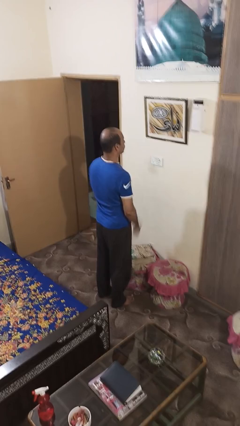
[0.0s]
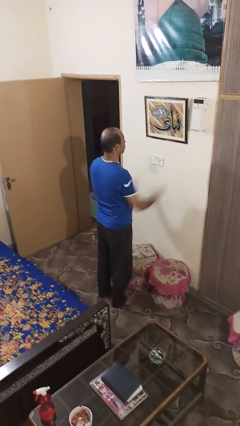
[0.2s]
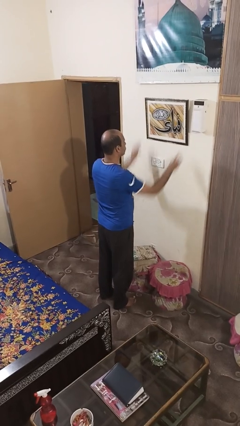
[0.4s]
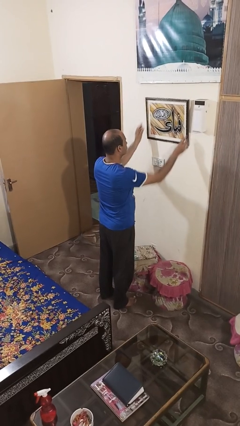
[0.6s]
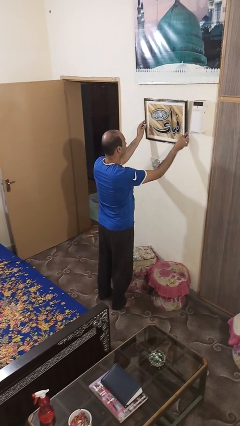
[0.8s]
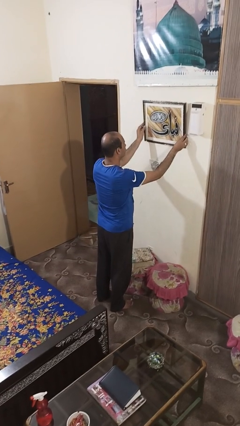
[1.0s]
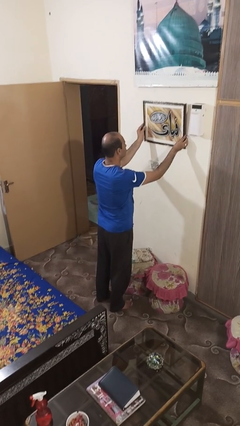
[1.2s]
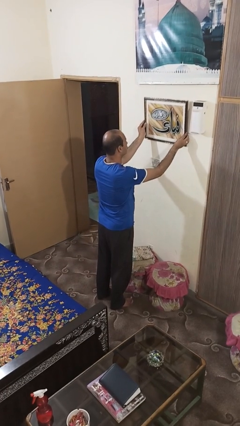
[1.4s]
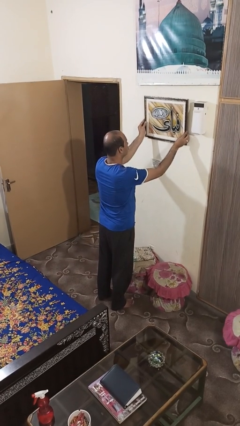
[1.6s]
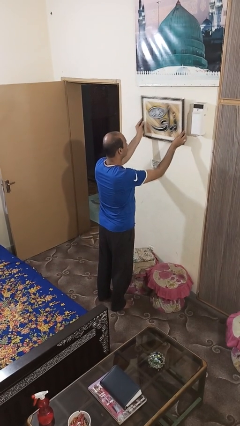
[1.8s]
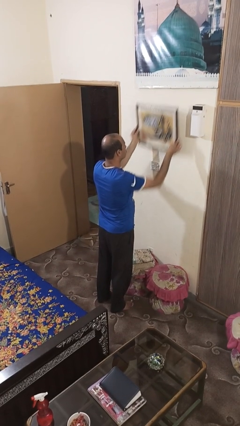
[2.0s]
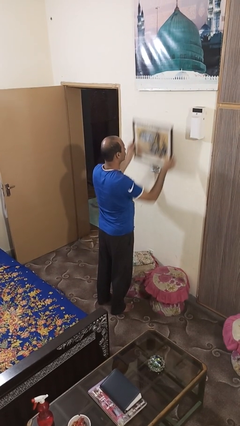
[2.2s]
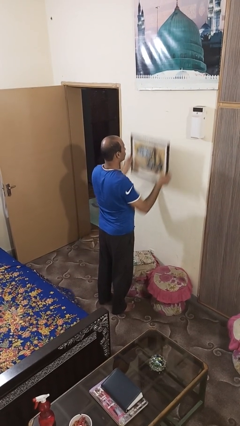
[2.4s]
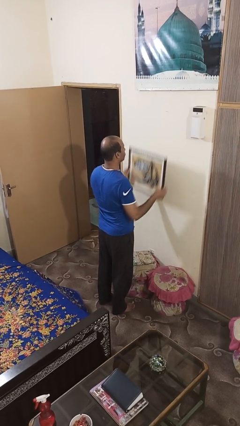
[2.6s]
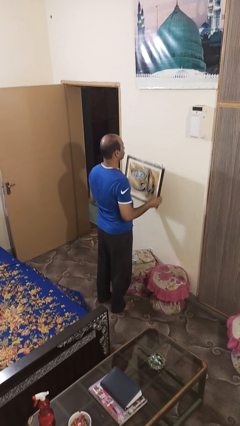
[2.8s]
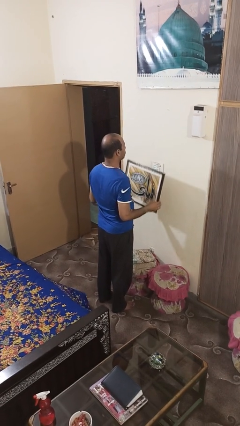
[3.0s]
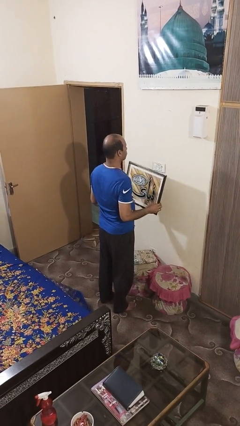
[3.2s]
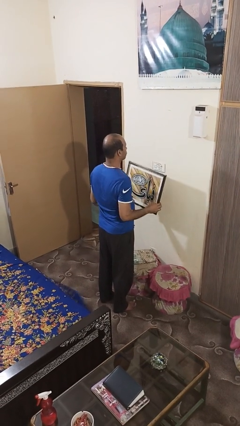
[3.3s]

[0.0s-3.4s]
person takes down picture frame

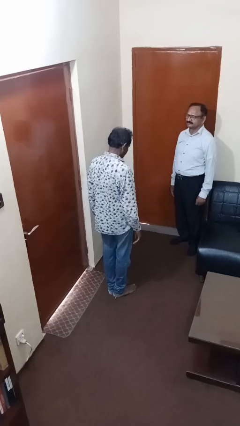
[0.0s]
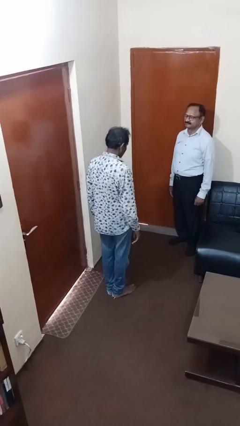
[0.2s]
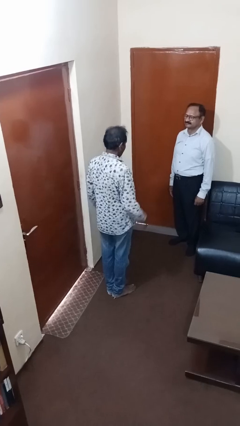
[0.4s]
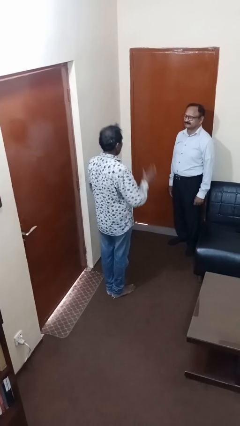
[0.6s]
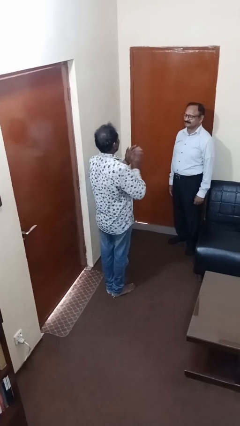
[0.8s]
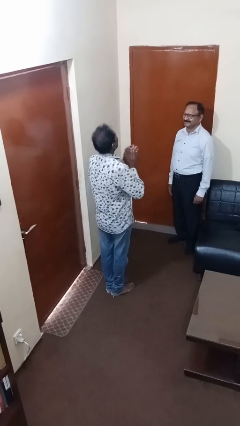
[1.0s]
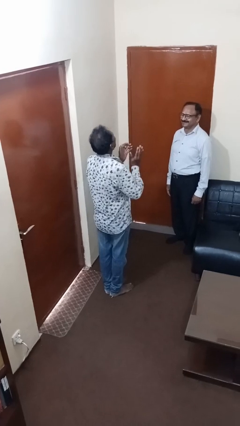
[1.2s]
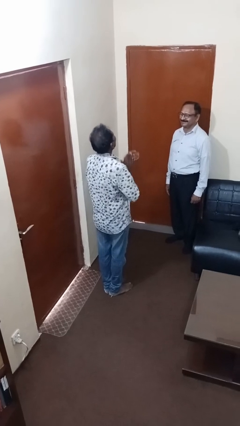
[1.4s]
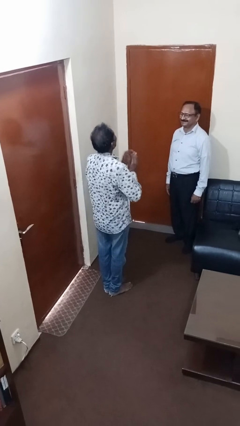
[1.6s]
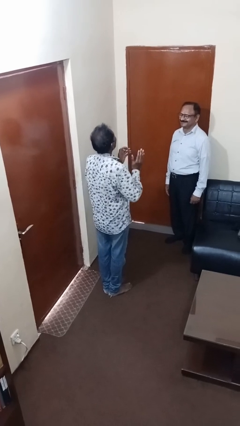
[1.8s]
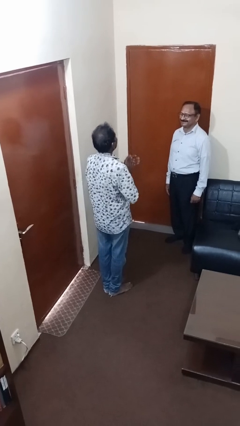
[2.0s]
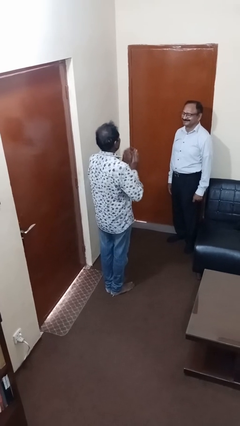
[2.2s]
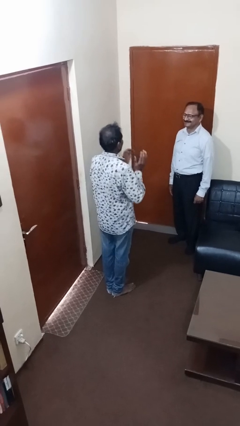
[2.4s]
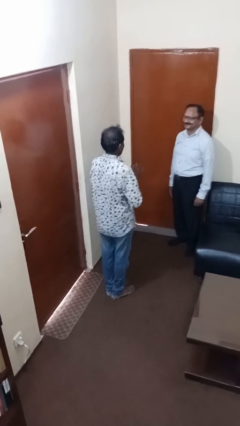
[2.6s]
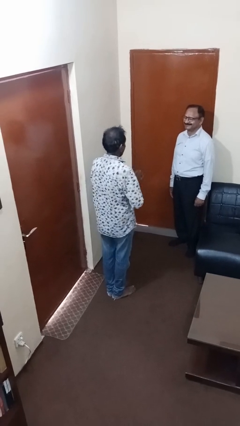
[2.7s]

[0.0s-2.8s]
person laughs with person

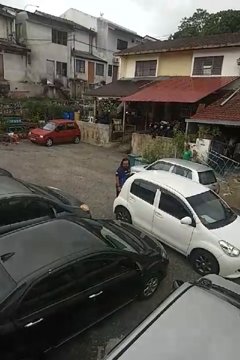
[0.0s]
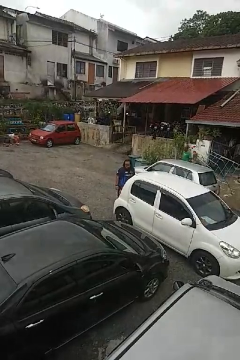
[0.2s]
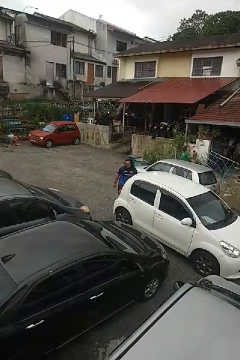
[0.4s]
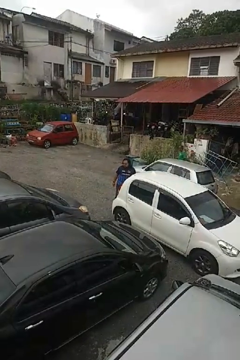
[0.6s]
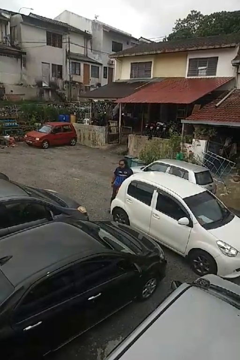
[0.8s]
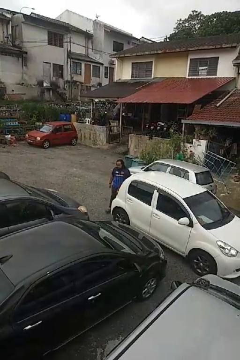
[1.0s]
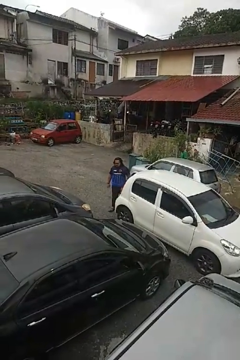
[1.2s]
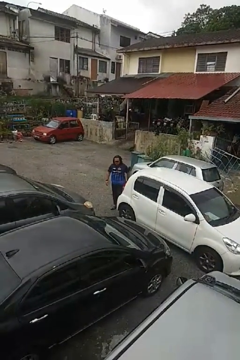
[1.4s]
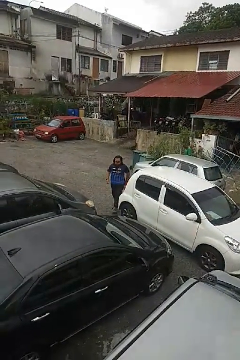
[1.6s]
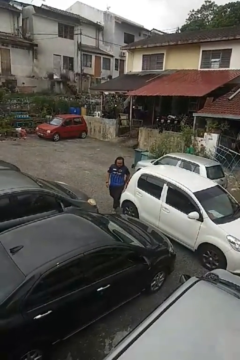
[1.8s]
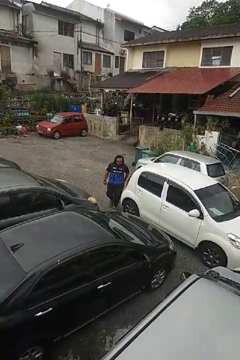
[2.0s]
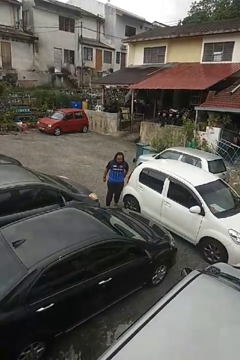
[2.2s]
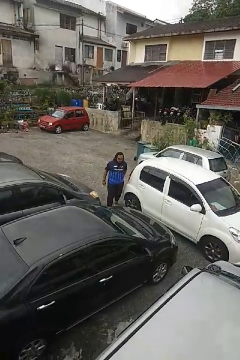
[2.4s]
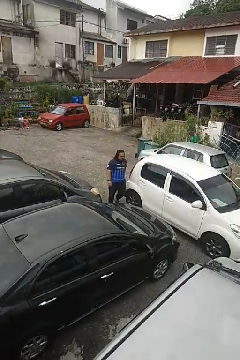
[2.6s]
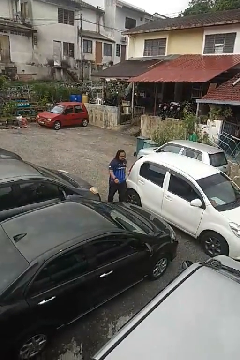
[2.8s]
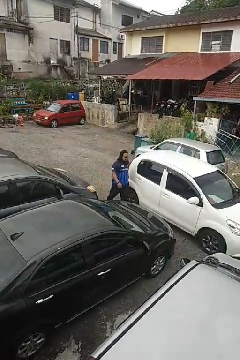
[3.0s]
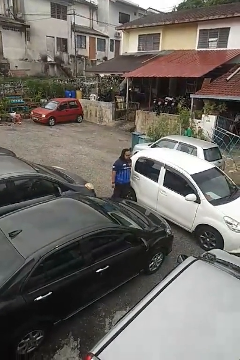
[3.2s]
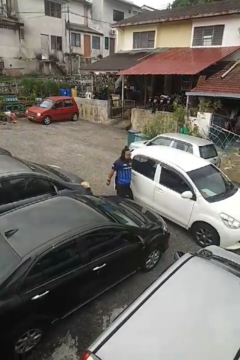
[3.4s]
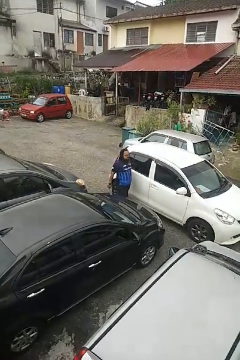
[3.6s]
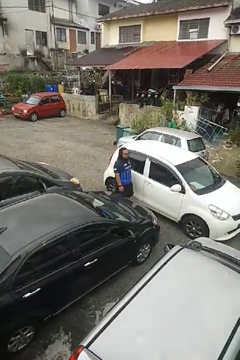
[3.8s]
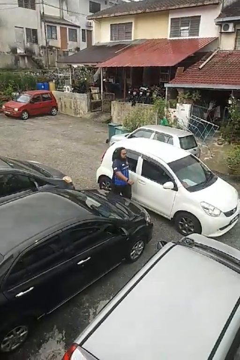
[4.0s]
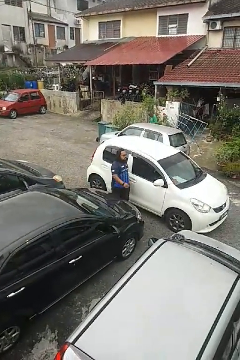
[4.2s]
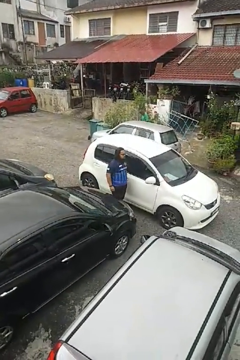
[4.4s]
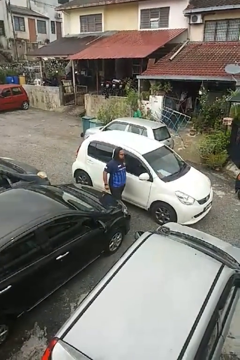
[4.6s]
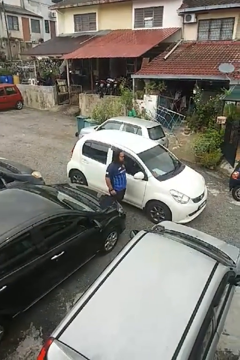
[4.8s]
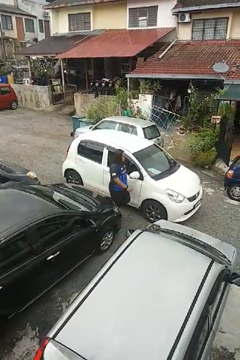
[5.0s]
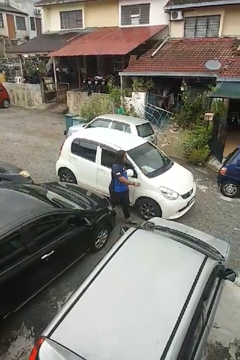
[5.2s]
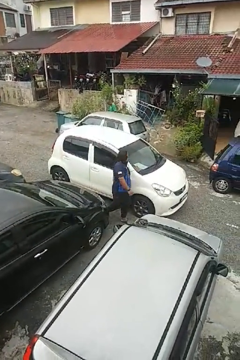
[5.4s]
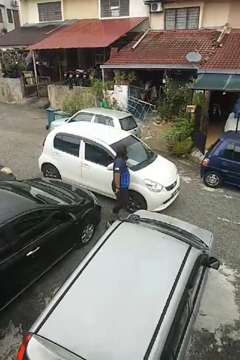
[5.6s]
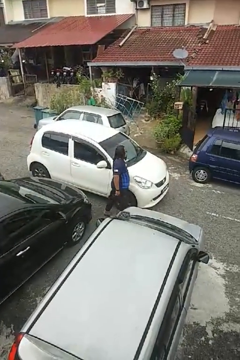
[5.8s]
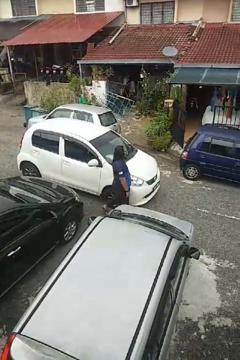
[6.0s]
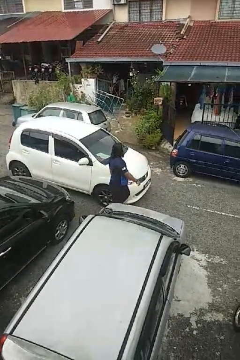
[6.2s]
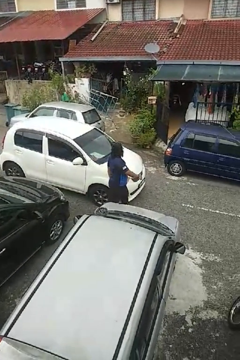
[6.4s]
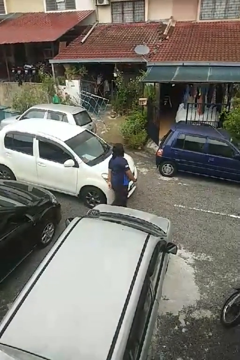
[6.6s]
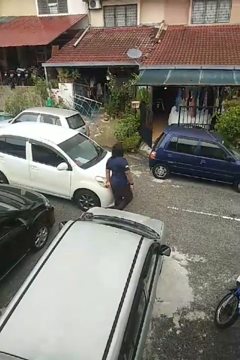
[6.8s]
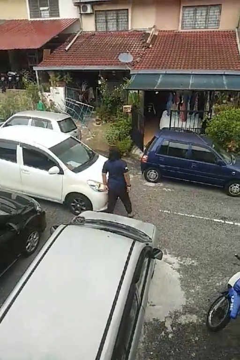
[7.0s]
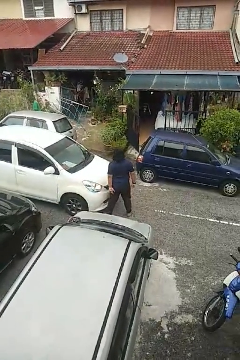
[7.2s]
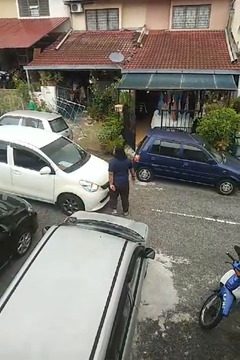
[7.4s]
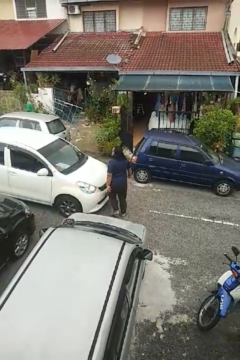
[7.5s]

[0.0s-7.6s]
person walks around car

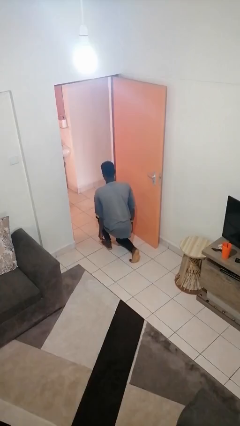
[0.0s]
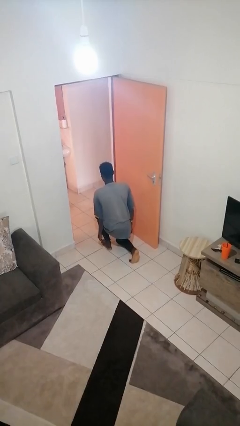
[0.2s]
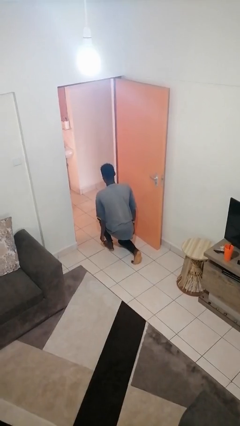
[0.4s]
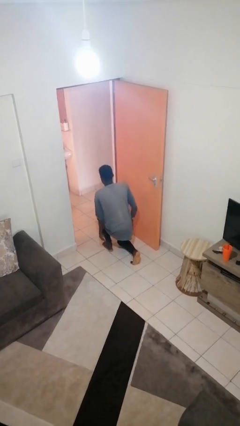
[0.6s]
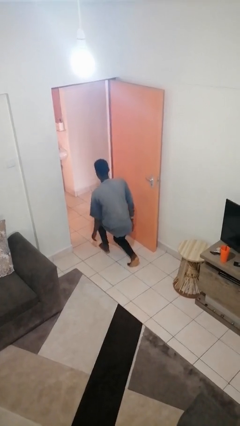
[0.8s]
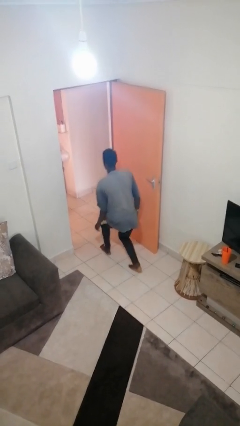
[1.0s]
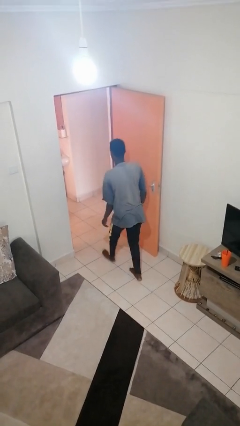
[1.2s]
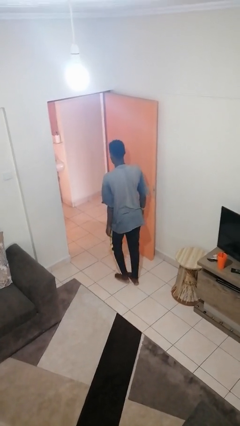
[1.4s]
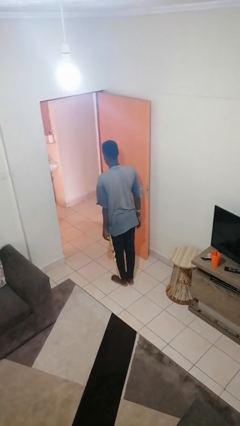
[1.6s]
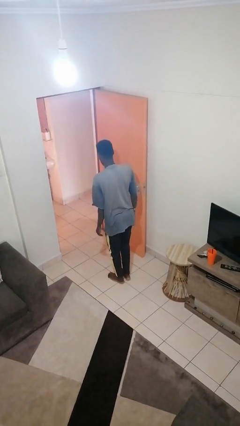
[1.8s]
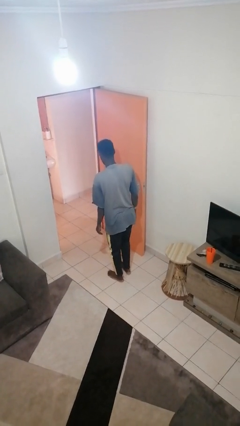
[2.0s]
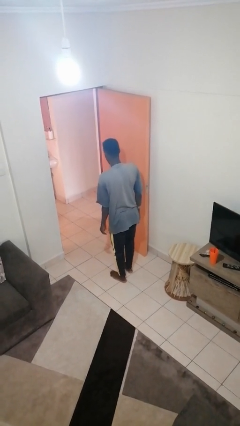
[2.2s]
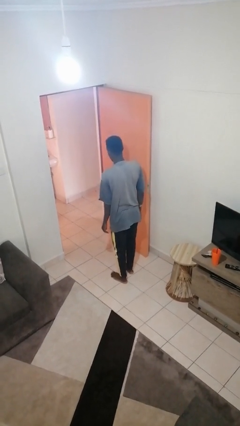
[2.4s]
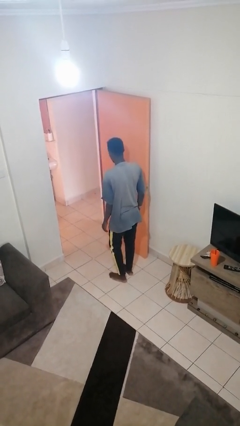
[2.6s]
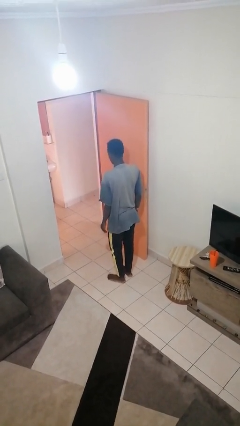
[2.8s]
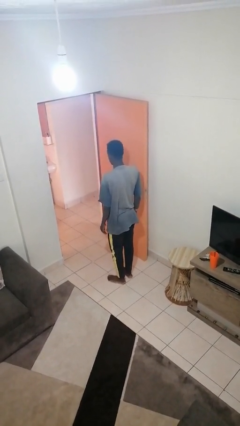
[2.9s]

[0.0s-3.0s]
person stands up from floor

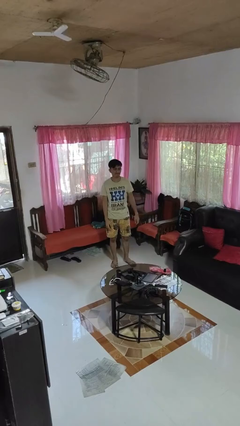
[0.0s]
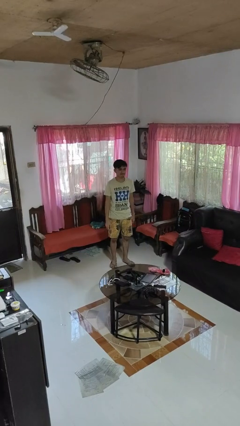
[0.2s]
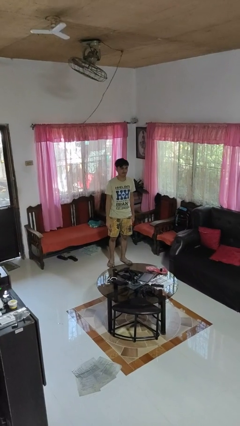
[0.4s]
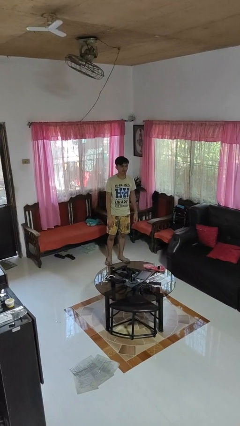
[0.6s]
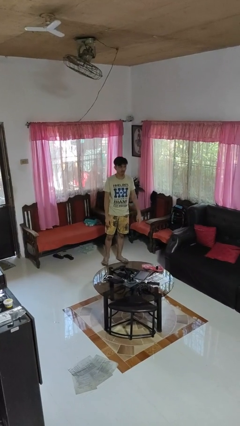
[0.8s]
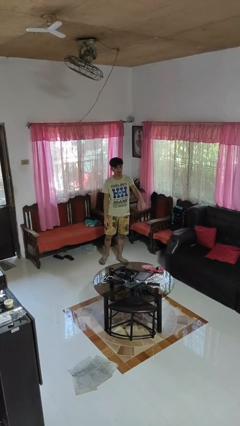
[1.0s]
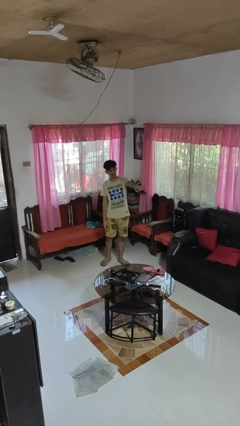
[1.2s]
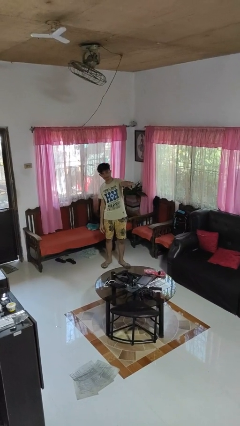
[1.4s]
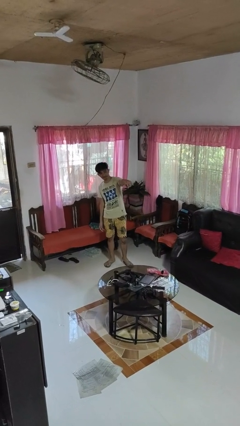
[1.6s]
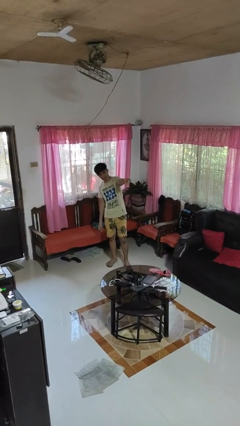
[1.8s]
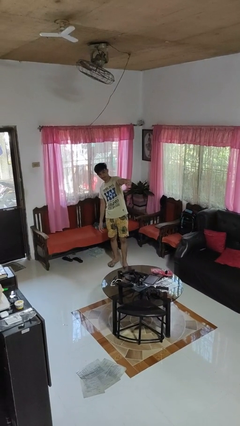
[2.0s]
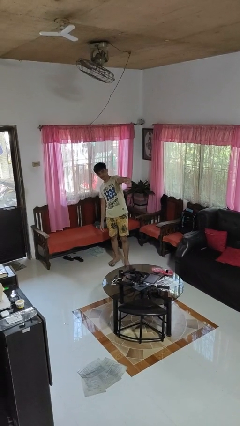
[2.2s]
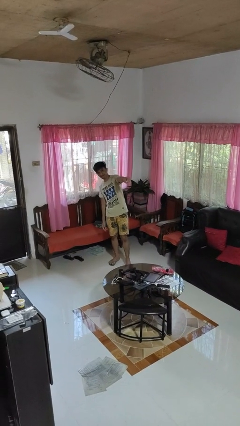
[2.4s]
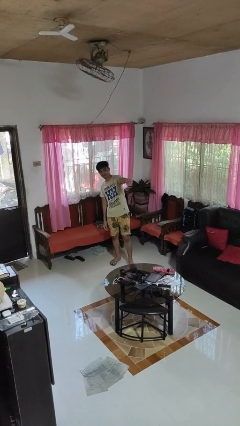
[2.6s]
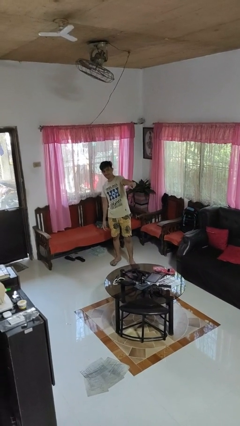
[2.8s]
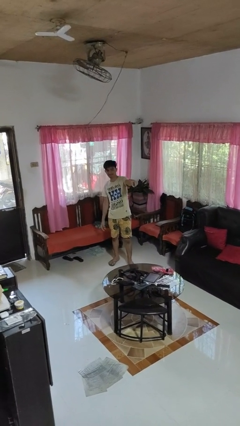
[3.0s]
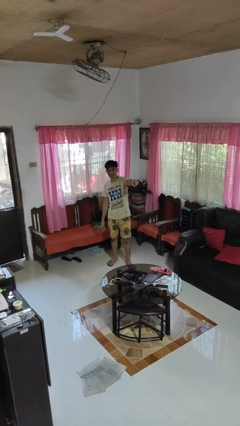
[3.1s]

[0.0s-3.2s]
person points at person
